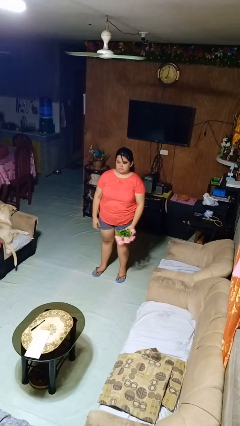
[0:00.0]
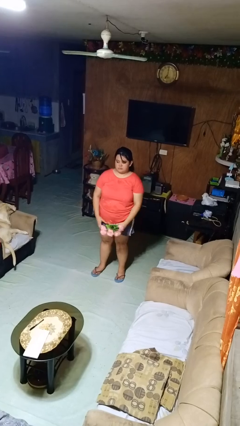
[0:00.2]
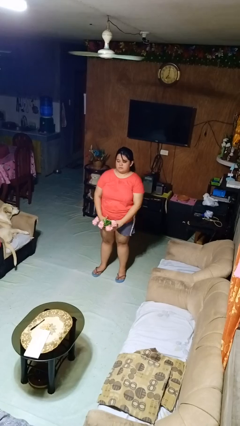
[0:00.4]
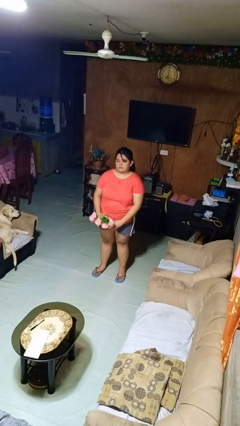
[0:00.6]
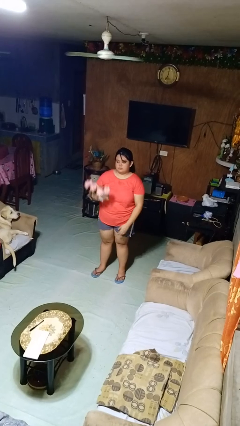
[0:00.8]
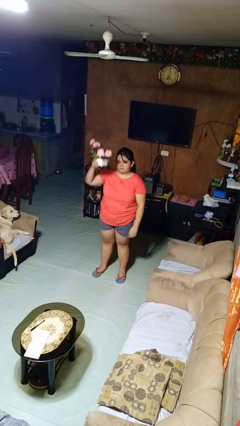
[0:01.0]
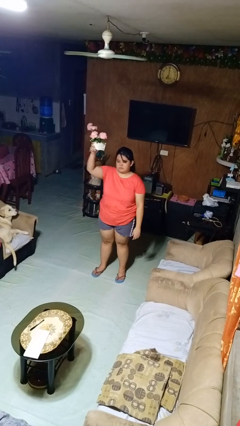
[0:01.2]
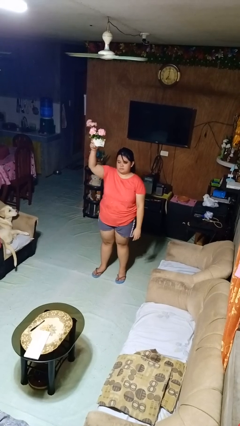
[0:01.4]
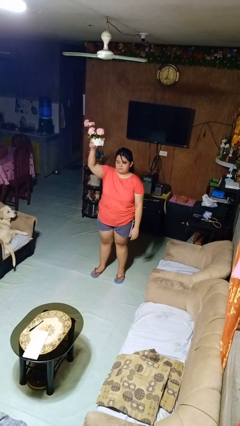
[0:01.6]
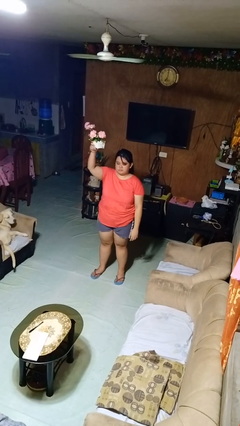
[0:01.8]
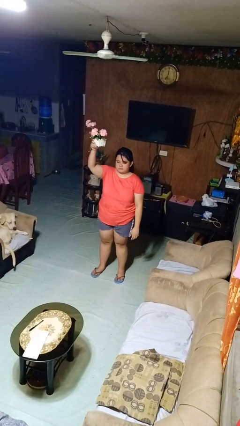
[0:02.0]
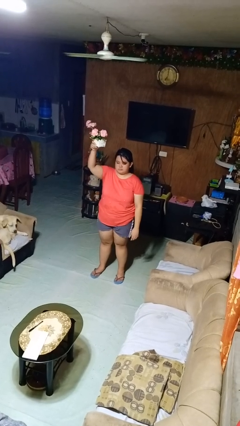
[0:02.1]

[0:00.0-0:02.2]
person holds object above head

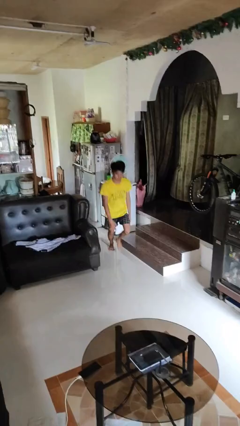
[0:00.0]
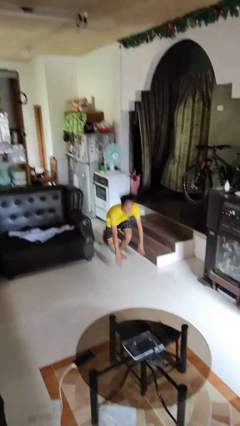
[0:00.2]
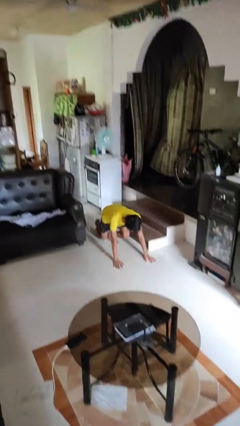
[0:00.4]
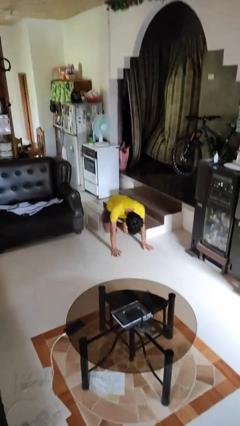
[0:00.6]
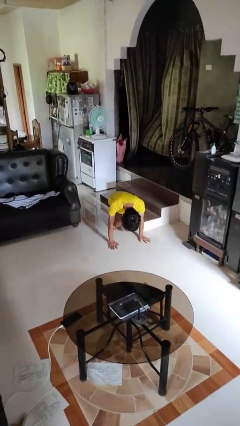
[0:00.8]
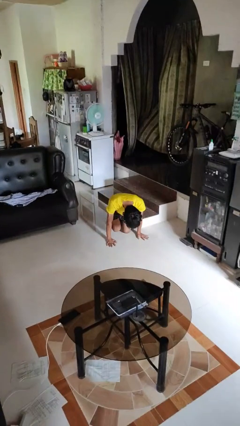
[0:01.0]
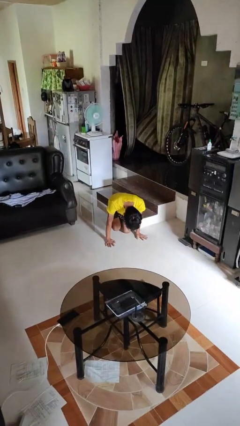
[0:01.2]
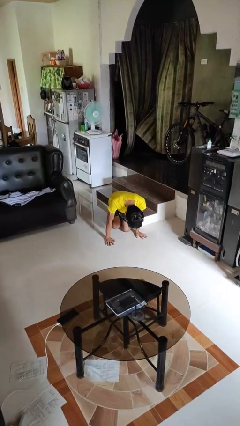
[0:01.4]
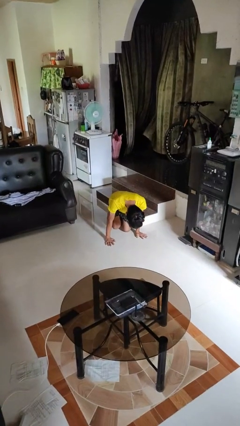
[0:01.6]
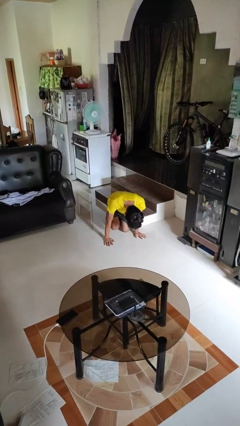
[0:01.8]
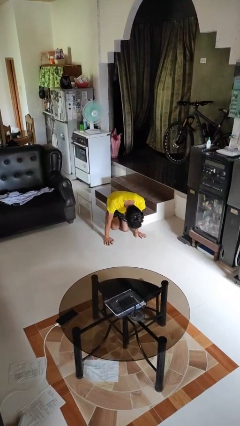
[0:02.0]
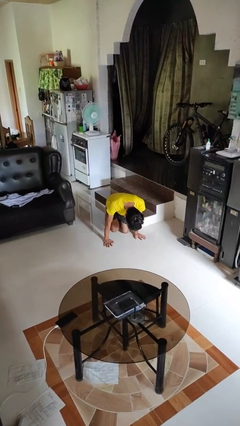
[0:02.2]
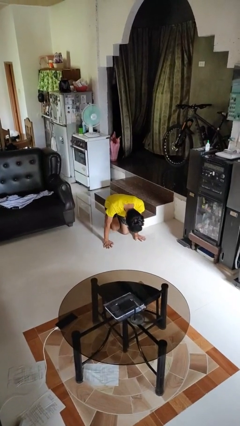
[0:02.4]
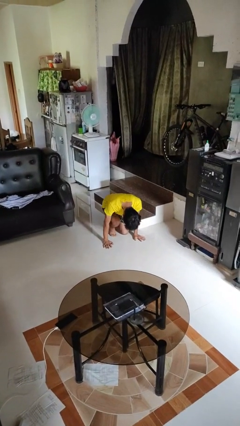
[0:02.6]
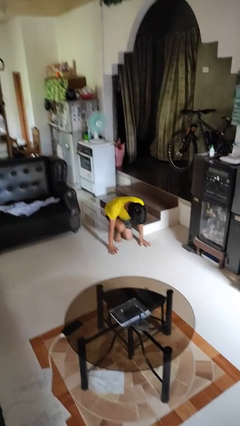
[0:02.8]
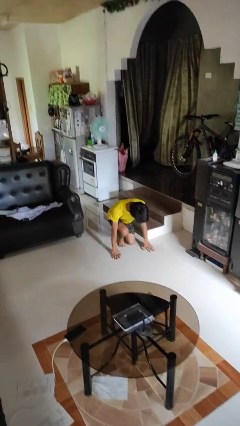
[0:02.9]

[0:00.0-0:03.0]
person trips on object on floor

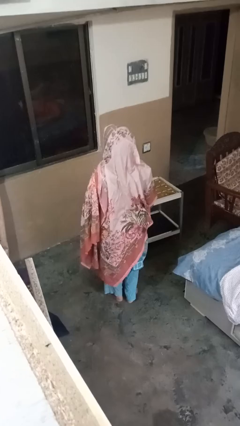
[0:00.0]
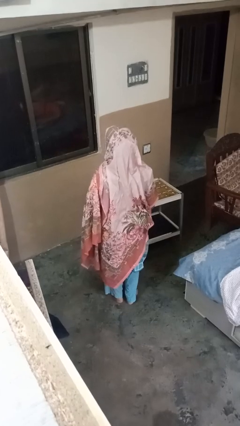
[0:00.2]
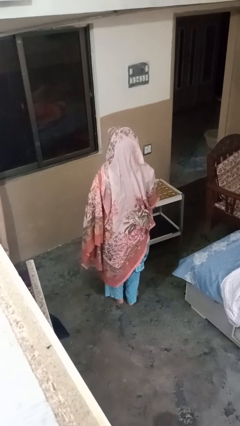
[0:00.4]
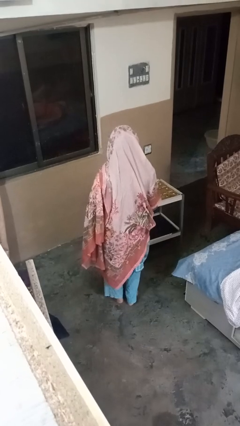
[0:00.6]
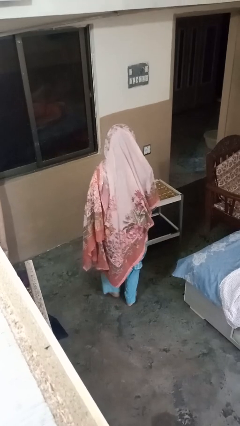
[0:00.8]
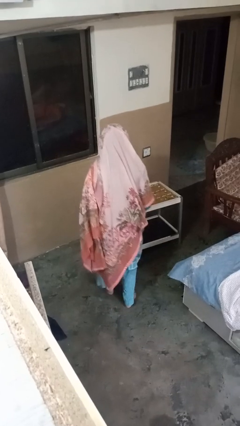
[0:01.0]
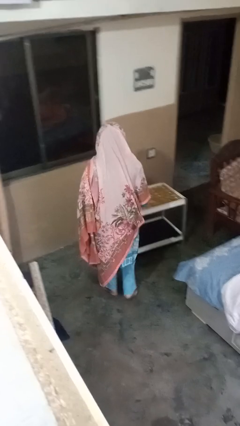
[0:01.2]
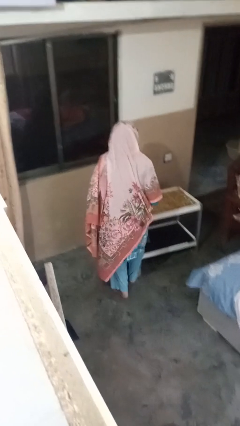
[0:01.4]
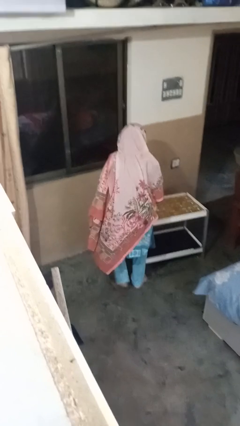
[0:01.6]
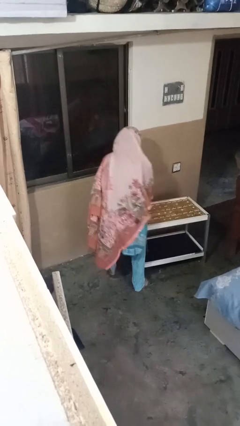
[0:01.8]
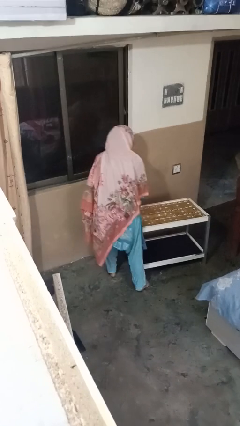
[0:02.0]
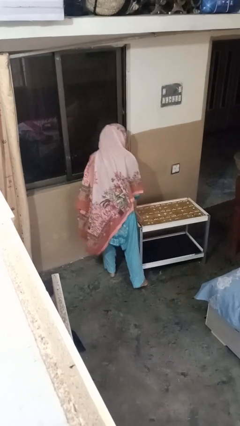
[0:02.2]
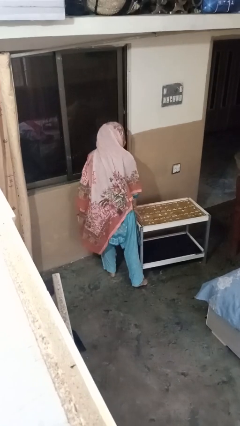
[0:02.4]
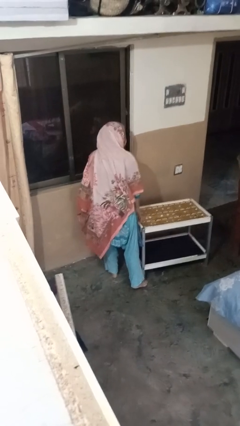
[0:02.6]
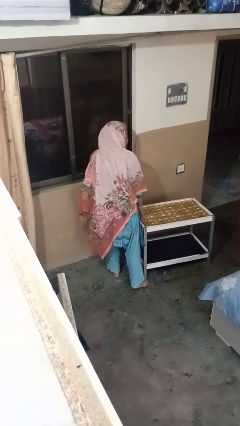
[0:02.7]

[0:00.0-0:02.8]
person bumps into table

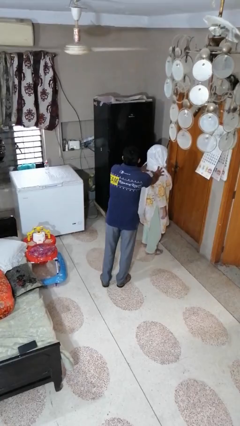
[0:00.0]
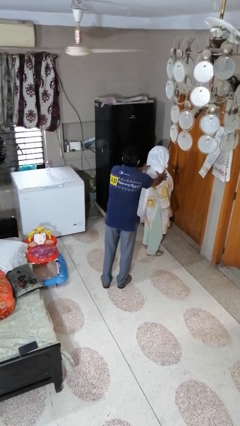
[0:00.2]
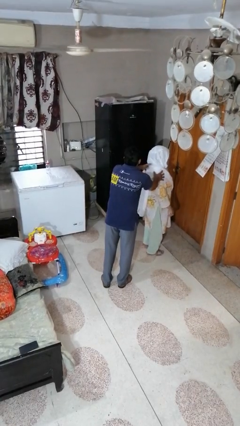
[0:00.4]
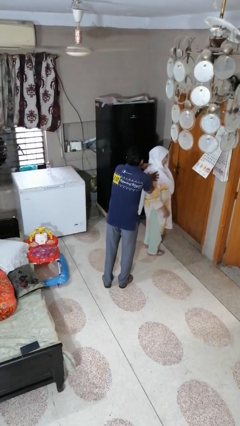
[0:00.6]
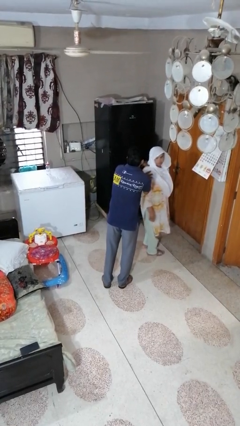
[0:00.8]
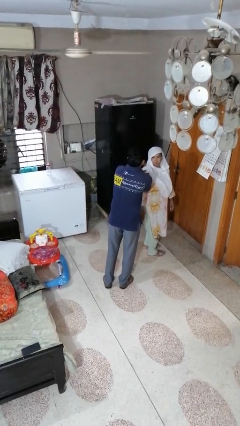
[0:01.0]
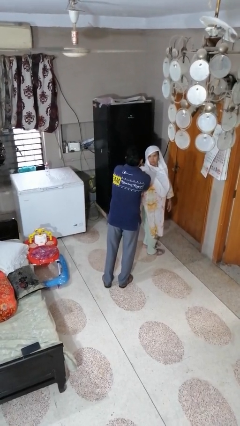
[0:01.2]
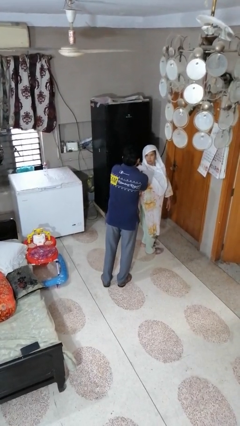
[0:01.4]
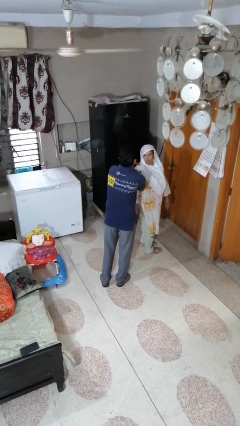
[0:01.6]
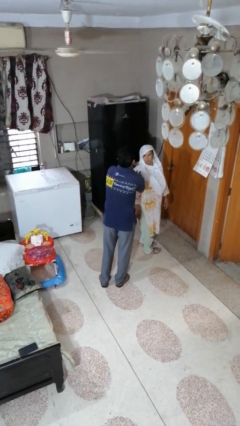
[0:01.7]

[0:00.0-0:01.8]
person spins person around

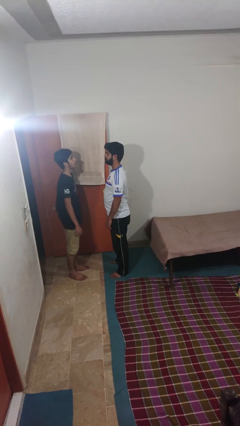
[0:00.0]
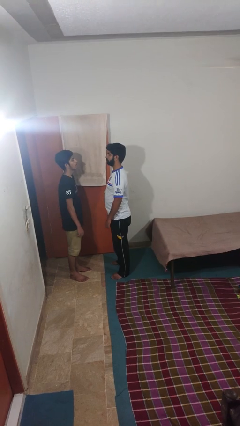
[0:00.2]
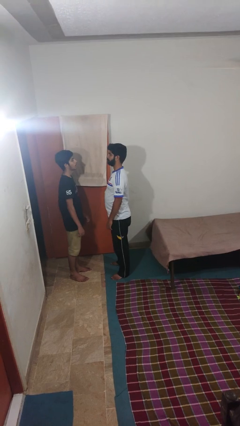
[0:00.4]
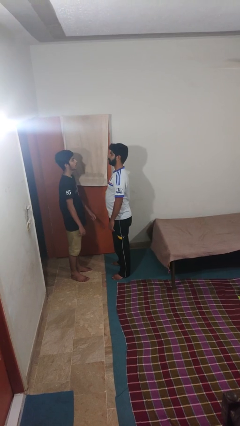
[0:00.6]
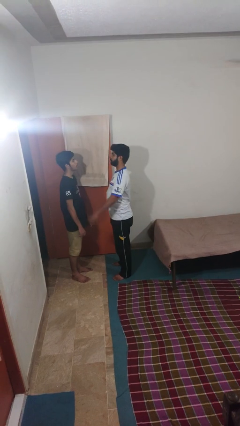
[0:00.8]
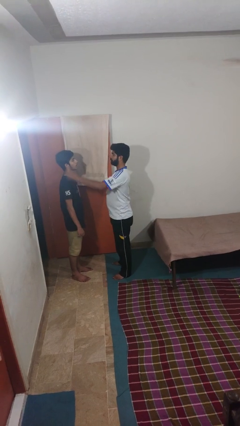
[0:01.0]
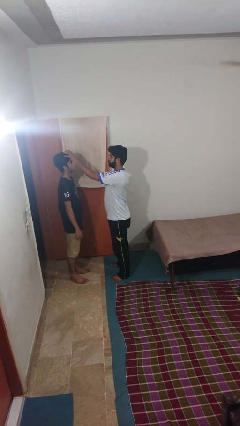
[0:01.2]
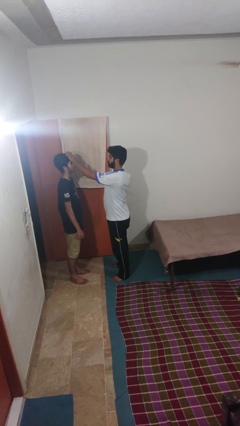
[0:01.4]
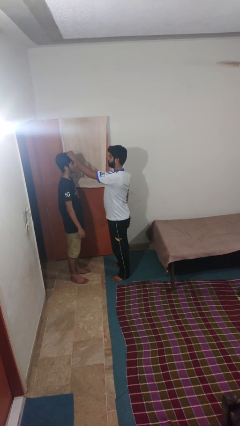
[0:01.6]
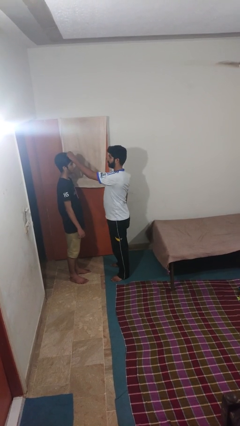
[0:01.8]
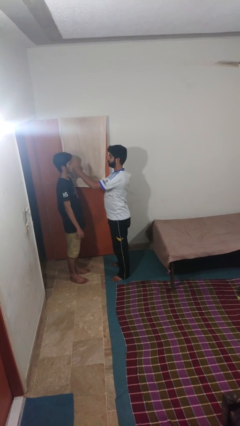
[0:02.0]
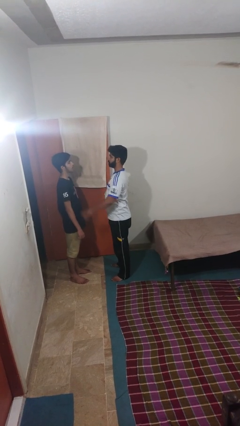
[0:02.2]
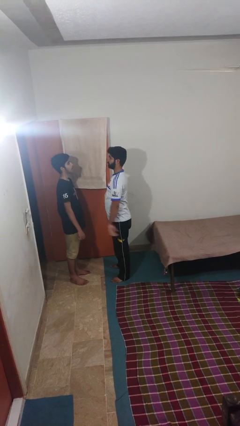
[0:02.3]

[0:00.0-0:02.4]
person grabs person by hair

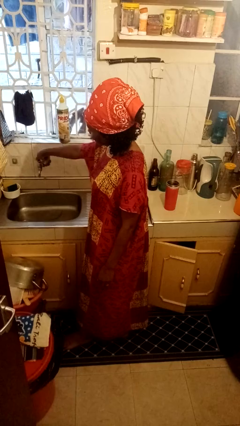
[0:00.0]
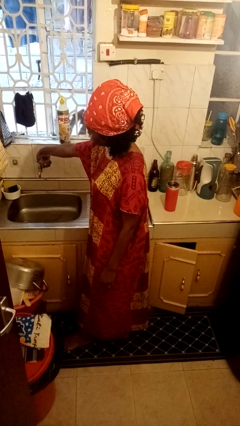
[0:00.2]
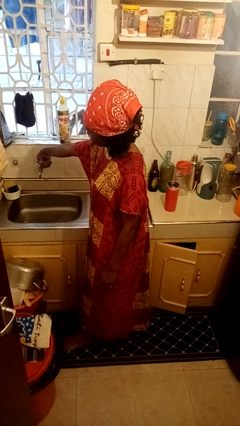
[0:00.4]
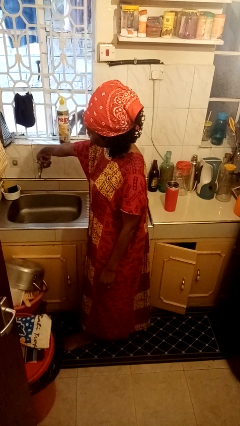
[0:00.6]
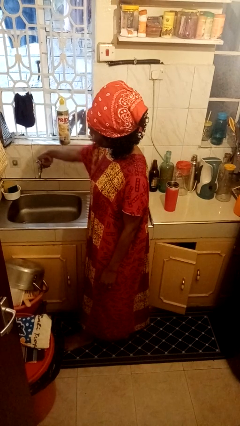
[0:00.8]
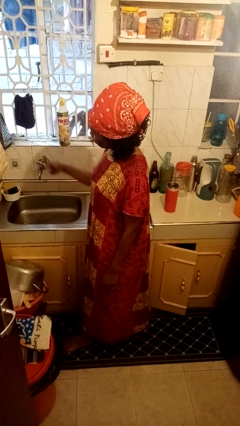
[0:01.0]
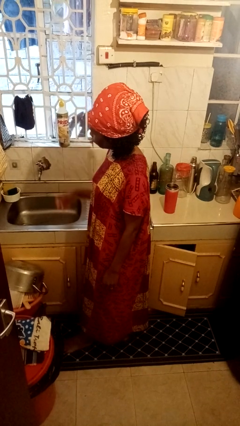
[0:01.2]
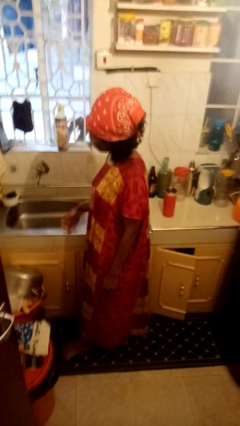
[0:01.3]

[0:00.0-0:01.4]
person turns off faucet

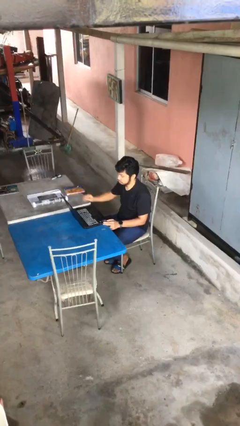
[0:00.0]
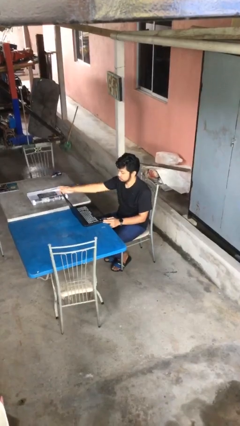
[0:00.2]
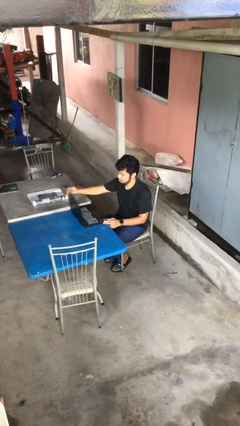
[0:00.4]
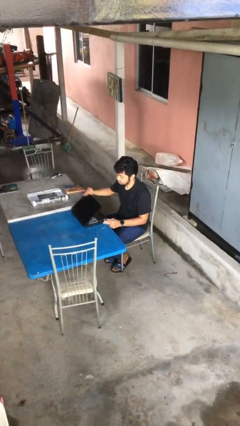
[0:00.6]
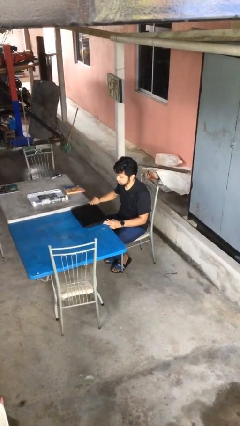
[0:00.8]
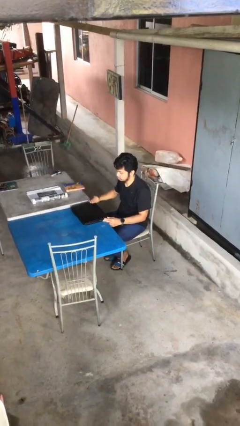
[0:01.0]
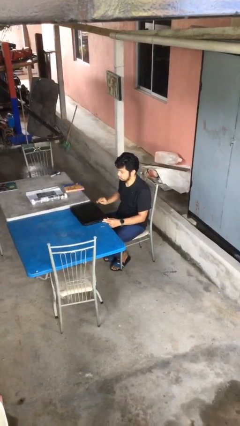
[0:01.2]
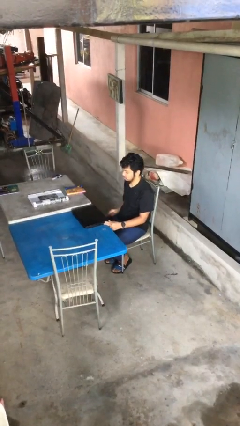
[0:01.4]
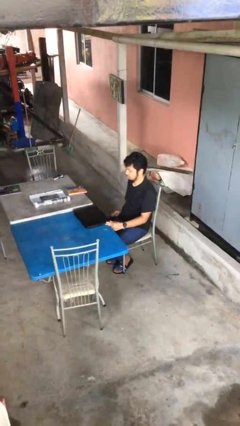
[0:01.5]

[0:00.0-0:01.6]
person closes laptop

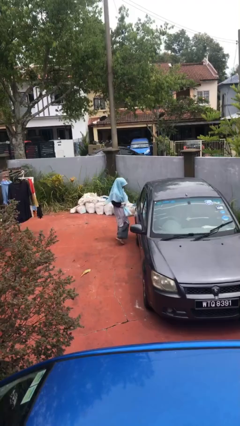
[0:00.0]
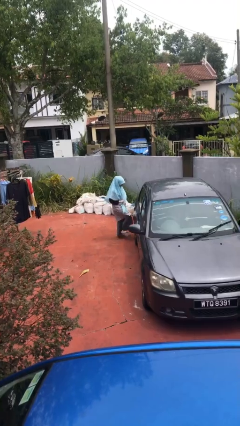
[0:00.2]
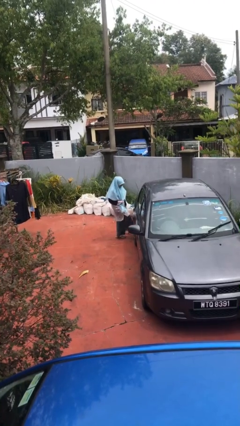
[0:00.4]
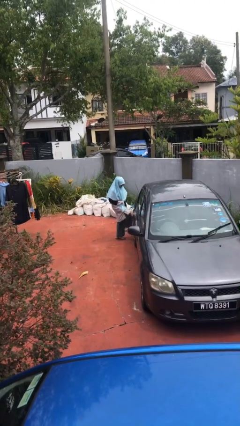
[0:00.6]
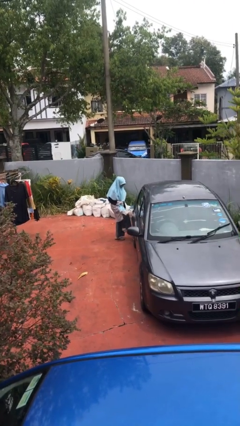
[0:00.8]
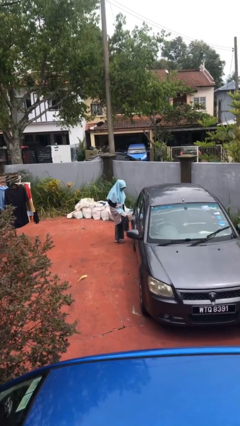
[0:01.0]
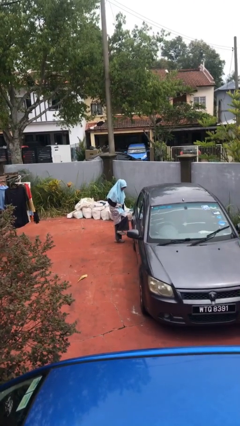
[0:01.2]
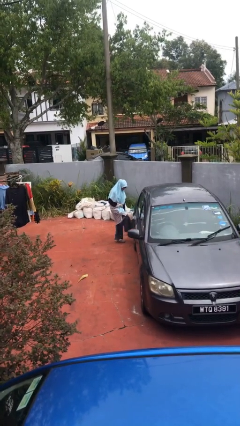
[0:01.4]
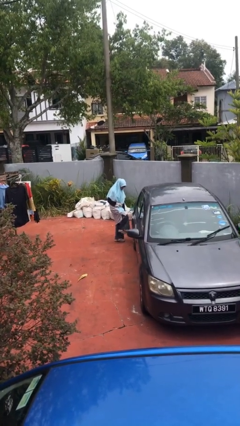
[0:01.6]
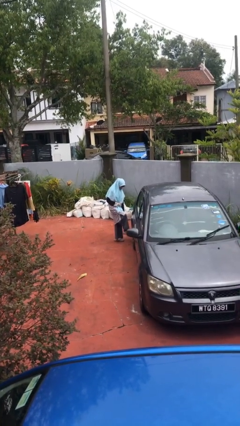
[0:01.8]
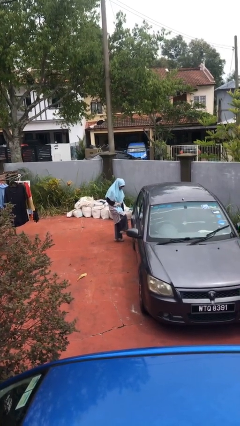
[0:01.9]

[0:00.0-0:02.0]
person kicks car tires
